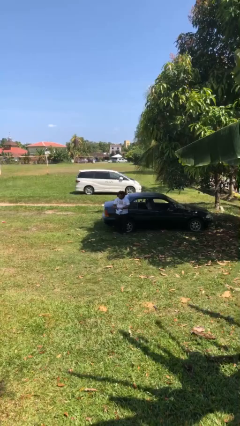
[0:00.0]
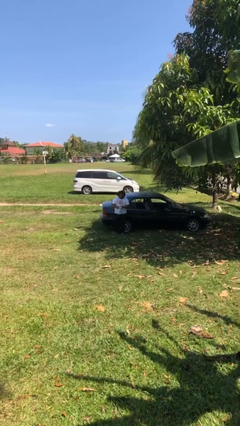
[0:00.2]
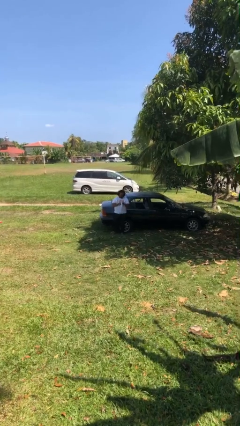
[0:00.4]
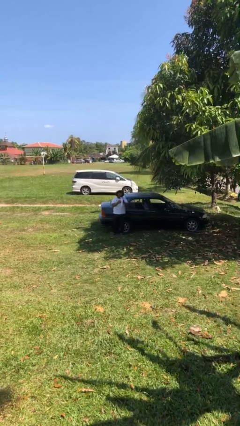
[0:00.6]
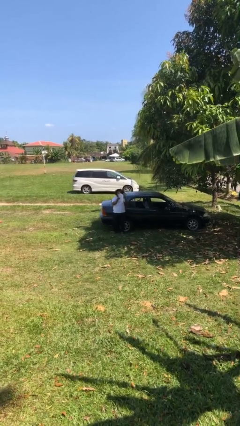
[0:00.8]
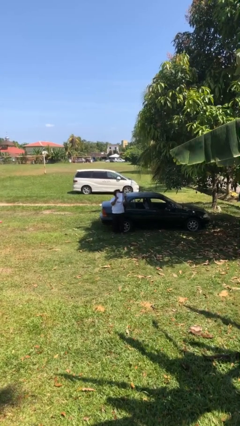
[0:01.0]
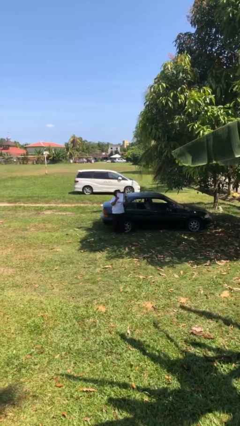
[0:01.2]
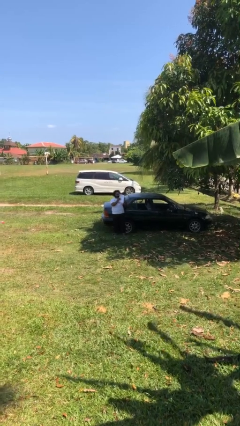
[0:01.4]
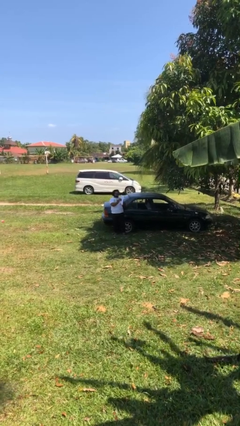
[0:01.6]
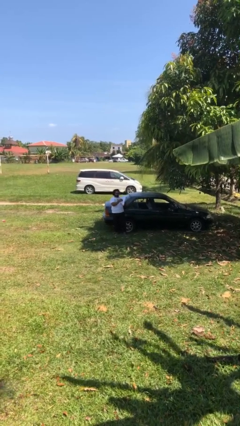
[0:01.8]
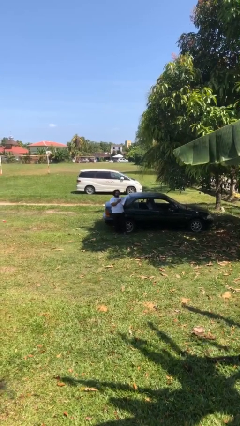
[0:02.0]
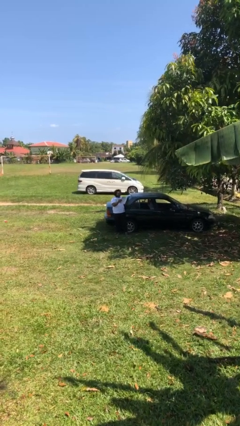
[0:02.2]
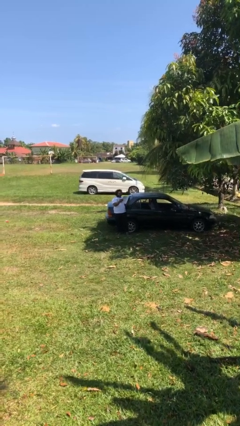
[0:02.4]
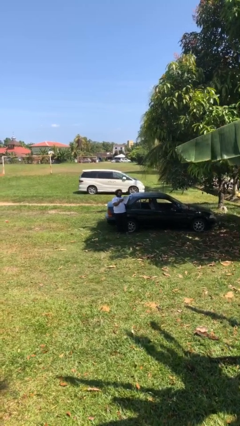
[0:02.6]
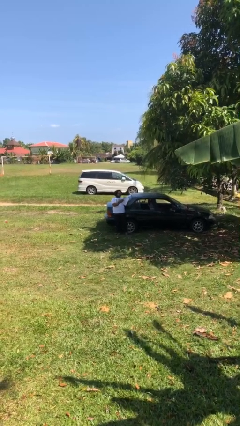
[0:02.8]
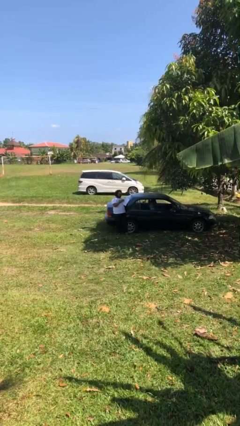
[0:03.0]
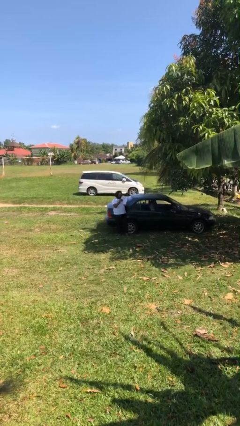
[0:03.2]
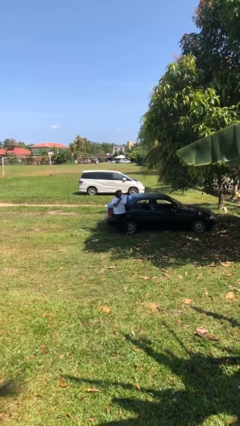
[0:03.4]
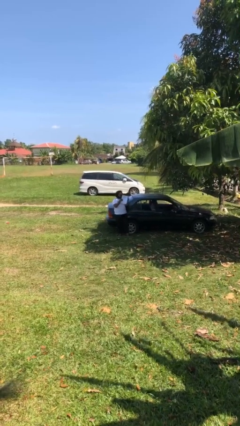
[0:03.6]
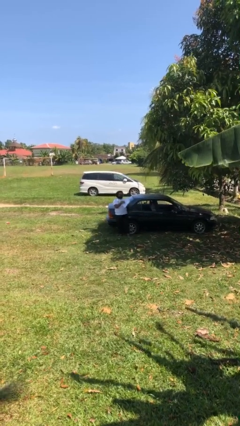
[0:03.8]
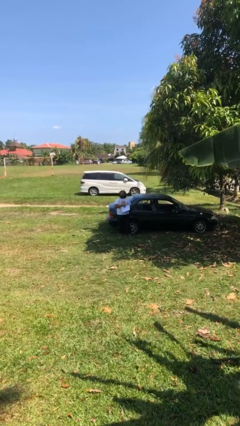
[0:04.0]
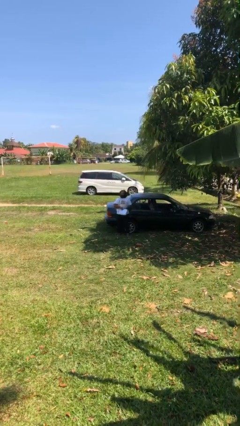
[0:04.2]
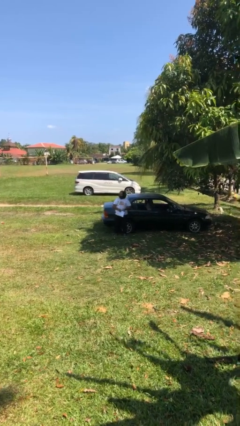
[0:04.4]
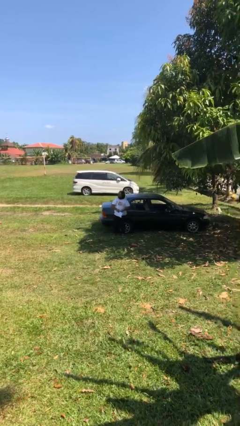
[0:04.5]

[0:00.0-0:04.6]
person reads document

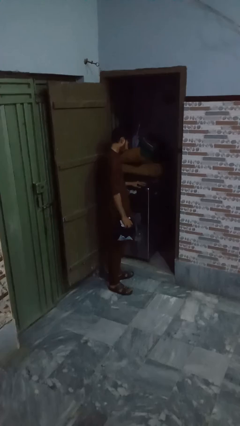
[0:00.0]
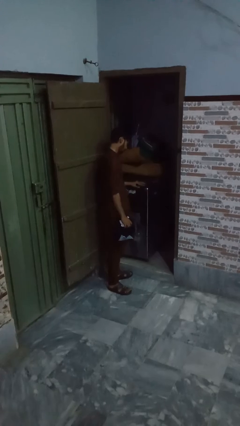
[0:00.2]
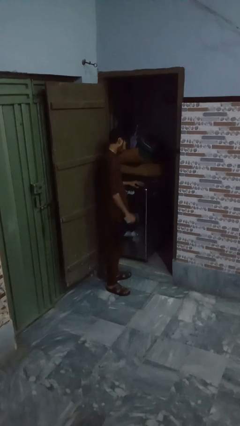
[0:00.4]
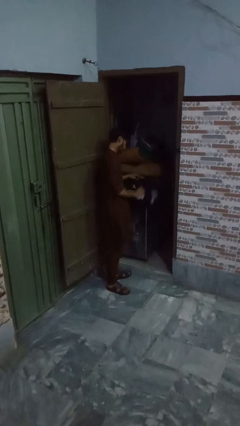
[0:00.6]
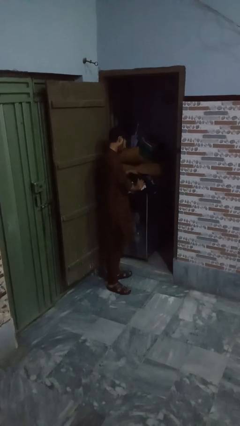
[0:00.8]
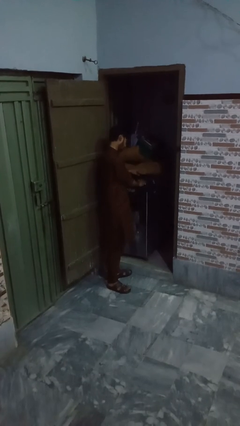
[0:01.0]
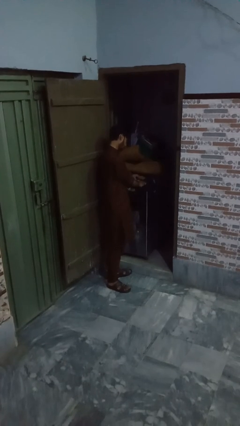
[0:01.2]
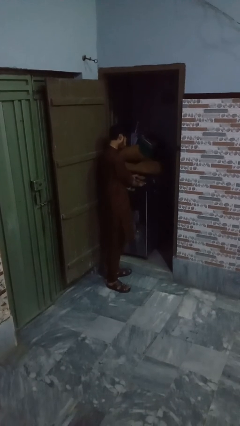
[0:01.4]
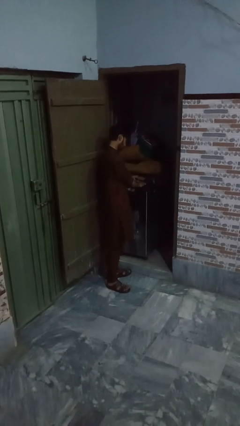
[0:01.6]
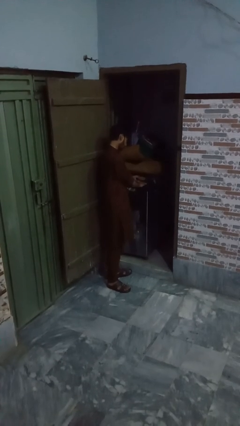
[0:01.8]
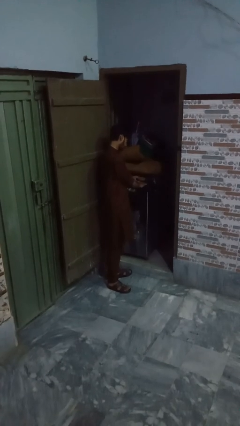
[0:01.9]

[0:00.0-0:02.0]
person loads dryer

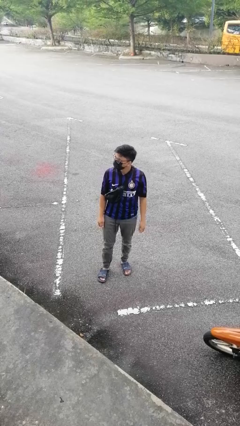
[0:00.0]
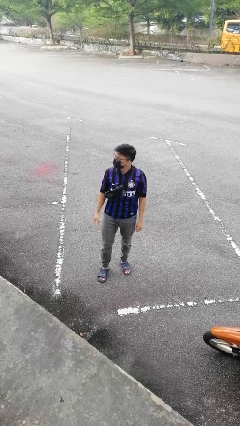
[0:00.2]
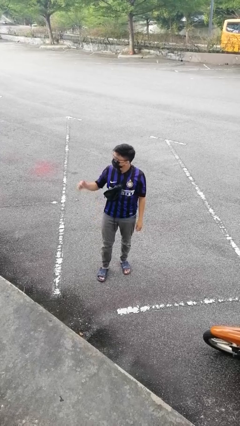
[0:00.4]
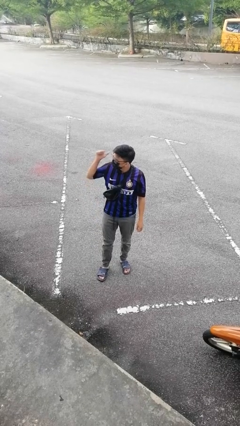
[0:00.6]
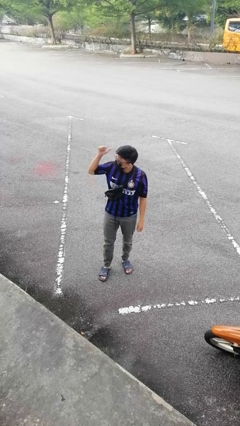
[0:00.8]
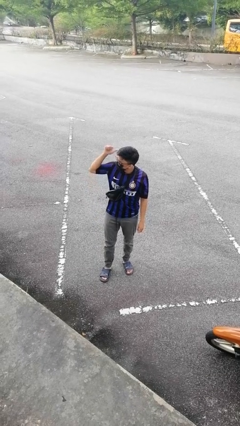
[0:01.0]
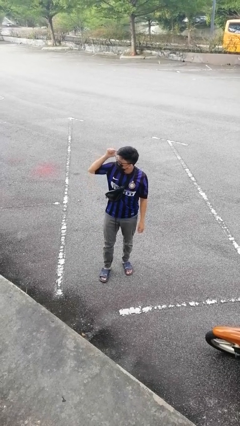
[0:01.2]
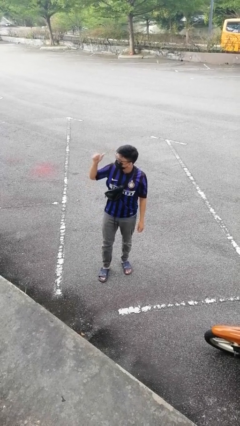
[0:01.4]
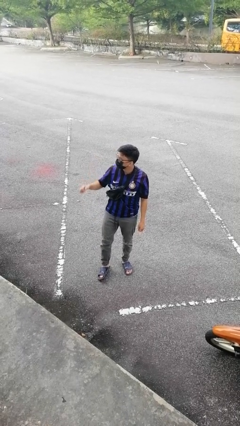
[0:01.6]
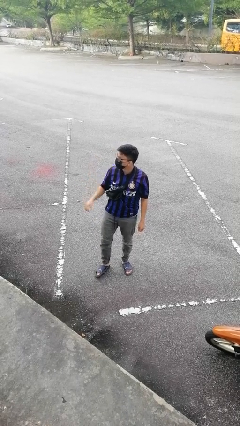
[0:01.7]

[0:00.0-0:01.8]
person gestures behind me

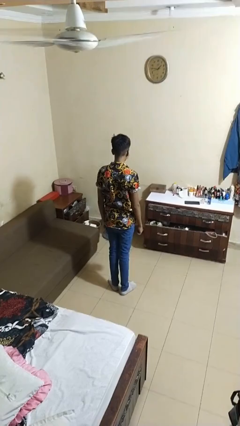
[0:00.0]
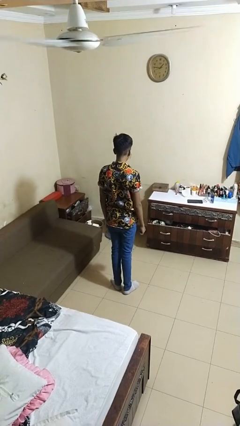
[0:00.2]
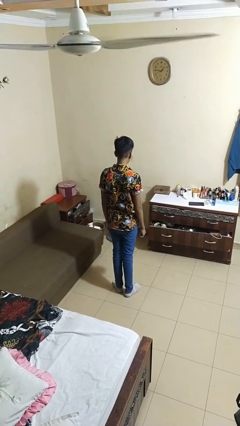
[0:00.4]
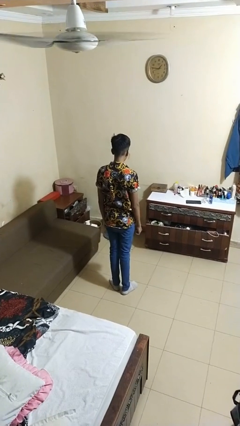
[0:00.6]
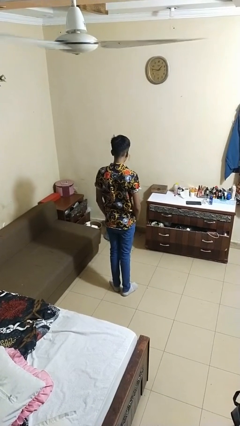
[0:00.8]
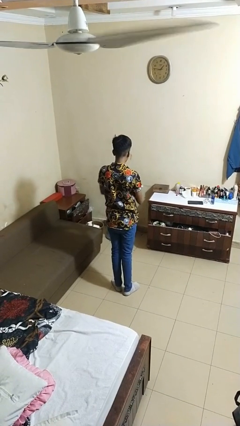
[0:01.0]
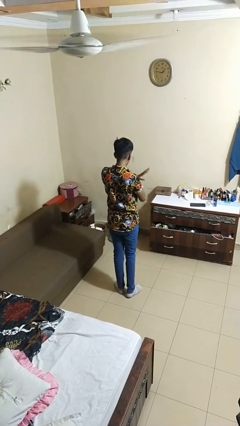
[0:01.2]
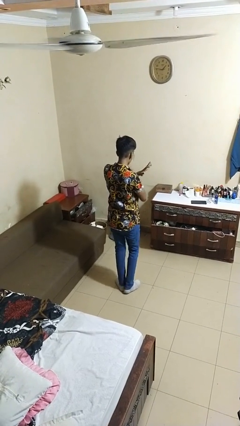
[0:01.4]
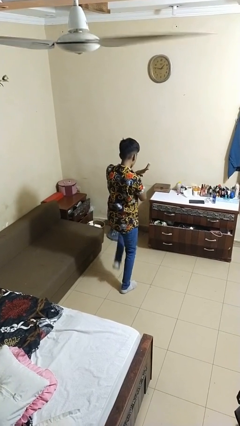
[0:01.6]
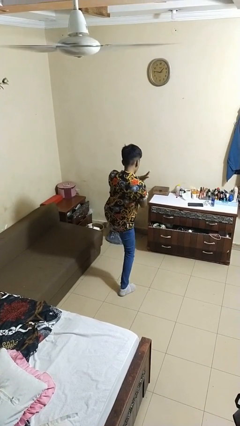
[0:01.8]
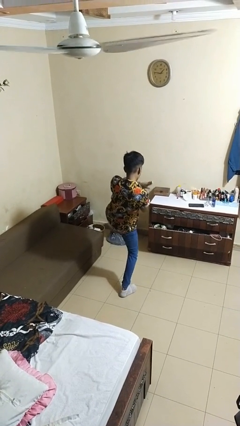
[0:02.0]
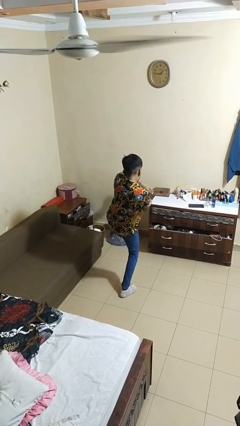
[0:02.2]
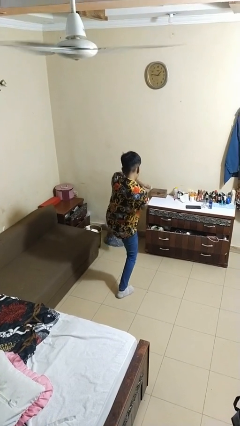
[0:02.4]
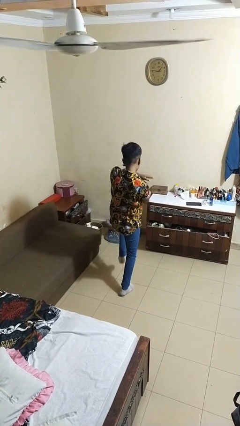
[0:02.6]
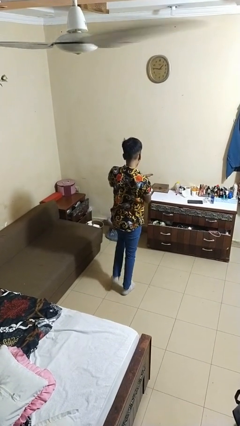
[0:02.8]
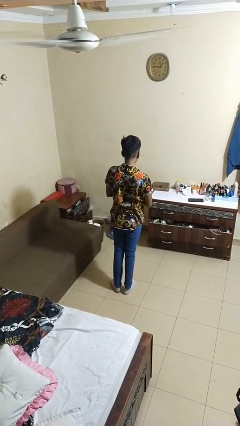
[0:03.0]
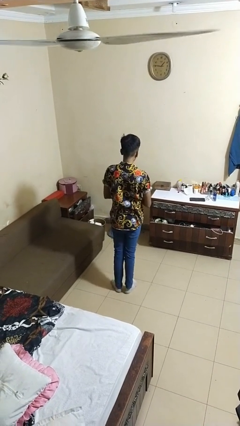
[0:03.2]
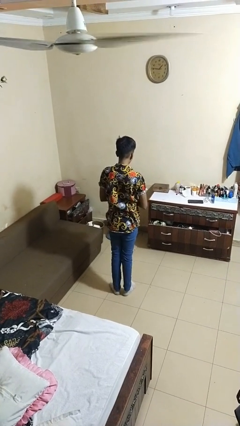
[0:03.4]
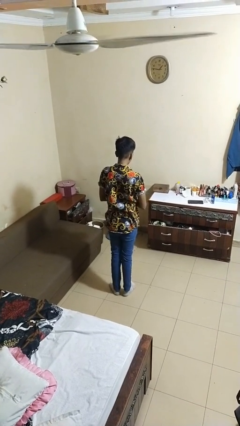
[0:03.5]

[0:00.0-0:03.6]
person karate kicks

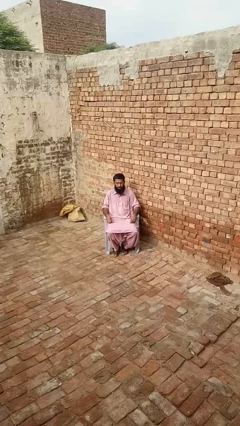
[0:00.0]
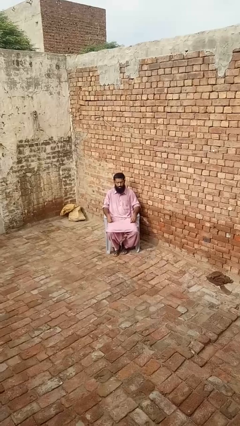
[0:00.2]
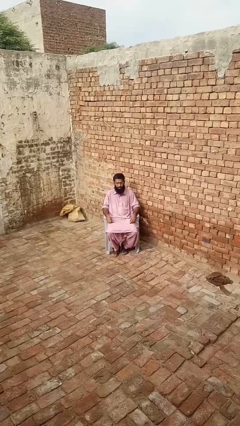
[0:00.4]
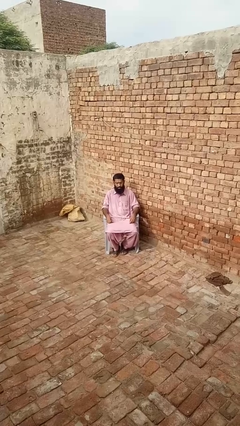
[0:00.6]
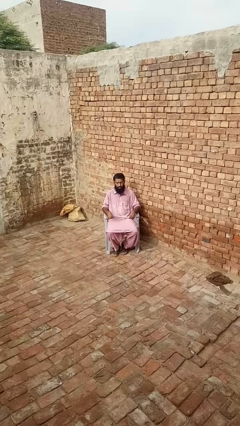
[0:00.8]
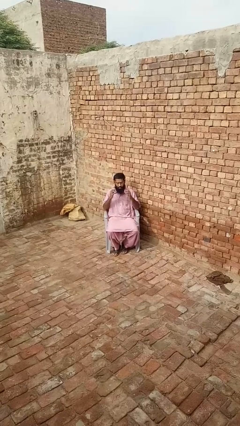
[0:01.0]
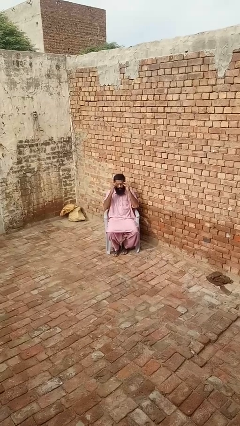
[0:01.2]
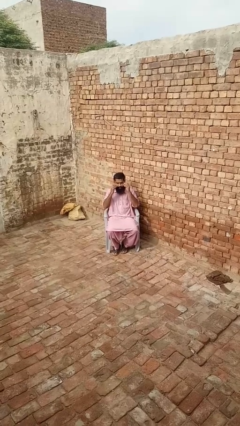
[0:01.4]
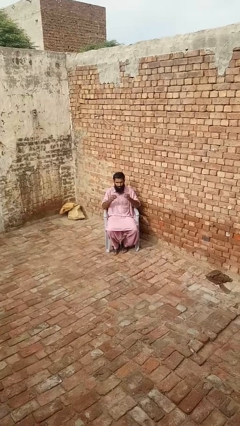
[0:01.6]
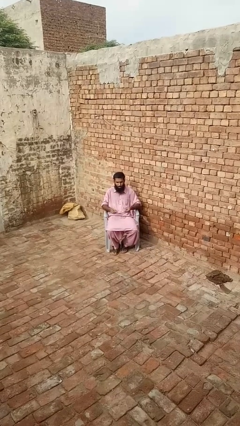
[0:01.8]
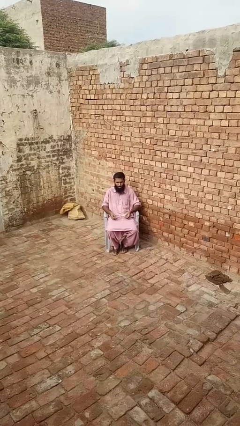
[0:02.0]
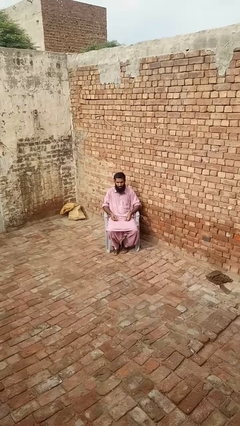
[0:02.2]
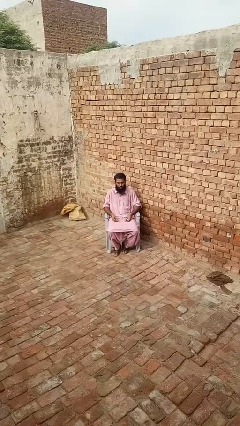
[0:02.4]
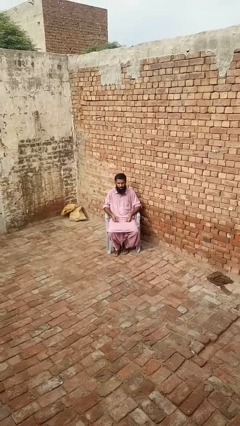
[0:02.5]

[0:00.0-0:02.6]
person takes off glasses

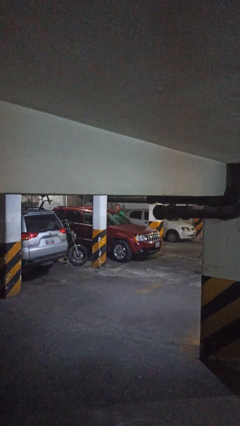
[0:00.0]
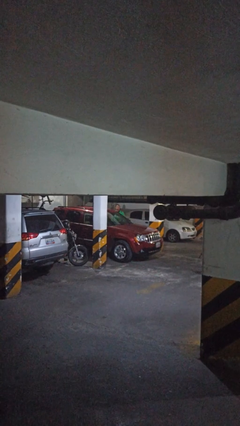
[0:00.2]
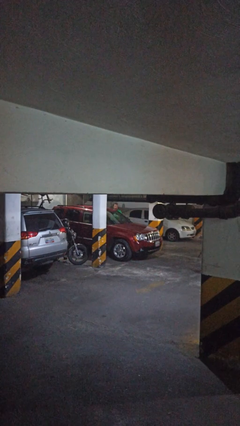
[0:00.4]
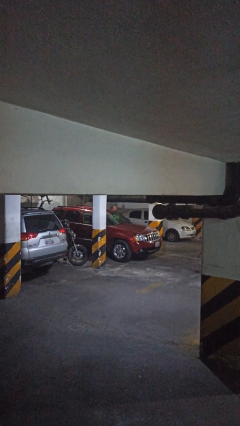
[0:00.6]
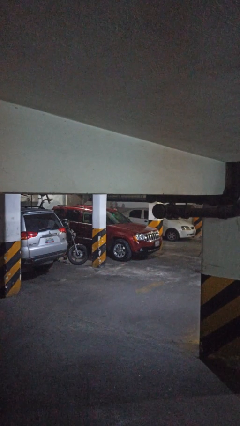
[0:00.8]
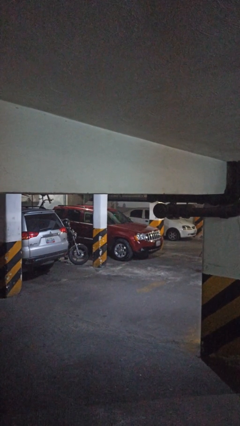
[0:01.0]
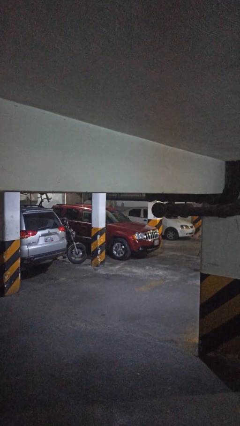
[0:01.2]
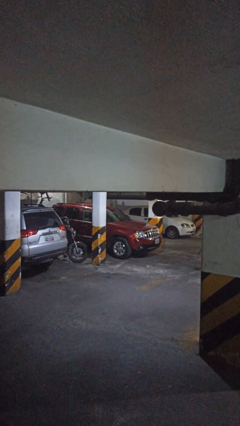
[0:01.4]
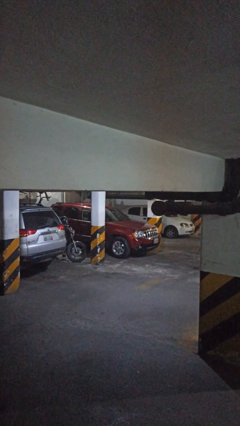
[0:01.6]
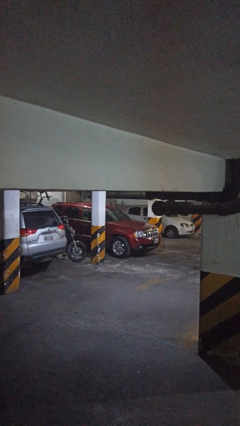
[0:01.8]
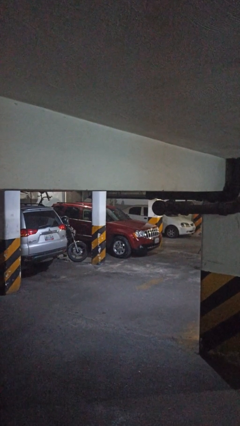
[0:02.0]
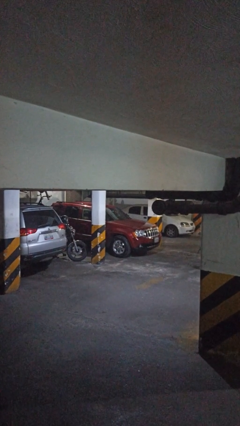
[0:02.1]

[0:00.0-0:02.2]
person enters car

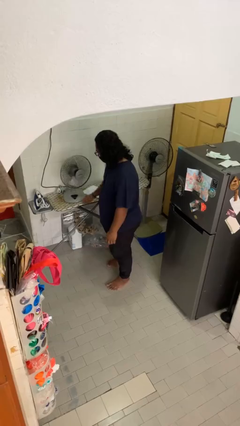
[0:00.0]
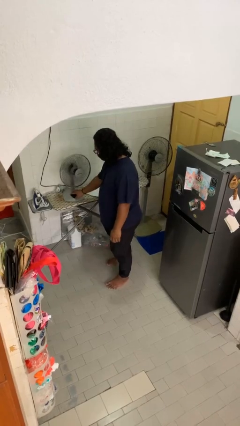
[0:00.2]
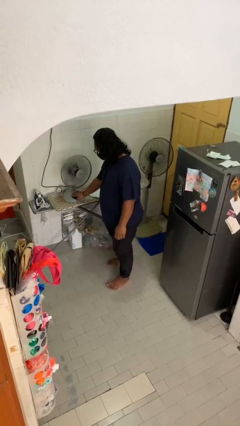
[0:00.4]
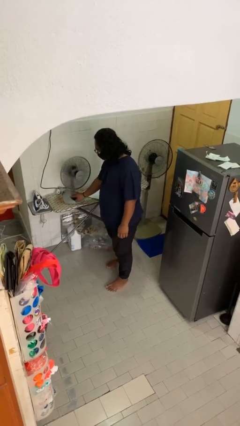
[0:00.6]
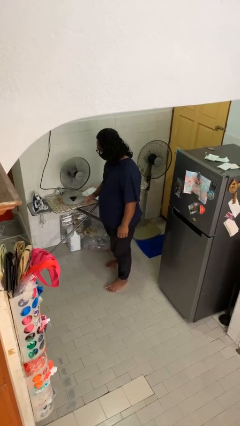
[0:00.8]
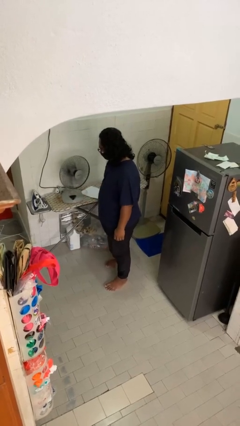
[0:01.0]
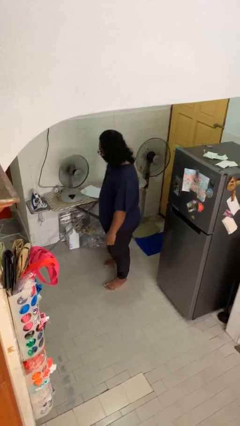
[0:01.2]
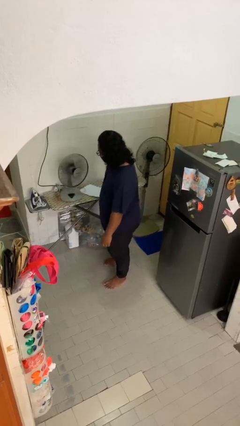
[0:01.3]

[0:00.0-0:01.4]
person turns off fan
